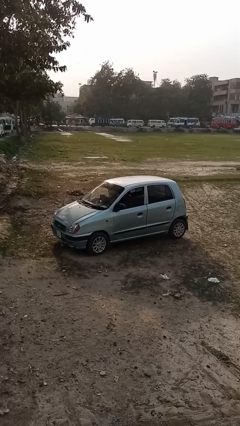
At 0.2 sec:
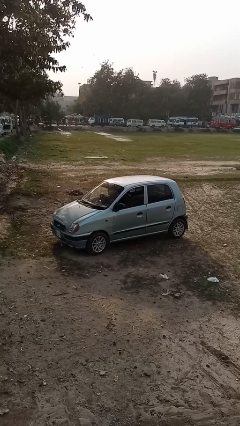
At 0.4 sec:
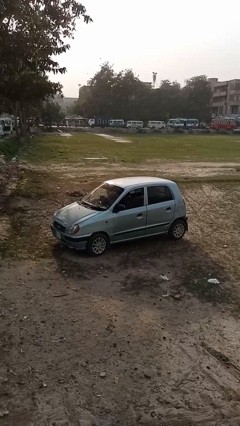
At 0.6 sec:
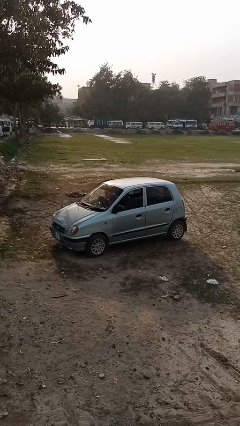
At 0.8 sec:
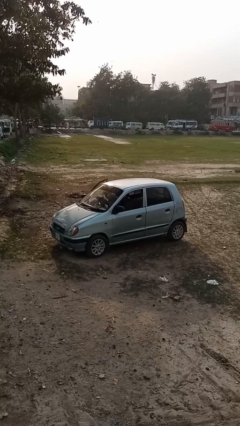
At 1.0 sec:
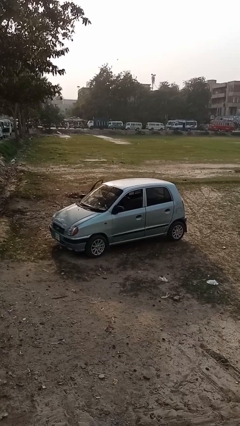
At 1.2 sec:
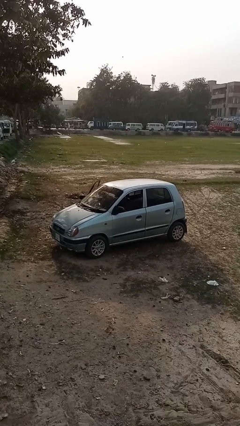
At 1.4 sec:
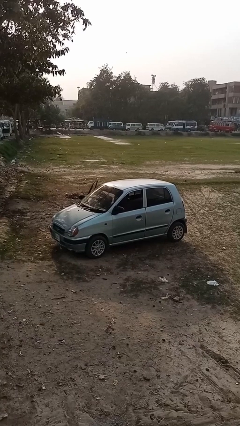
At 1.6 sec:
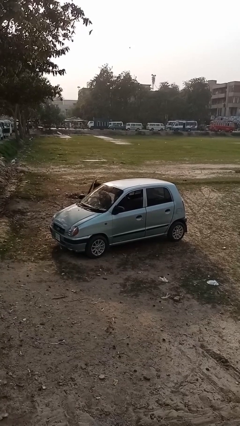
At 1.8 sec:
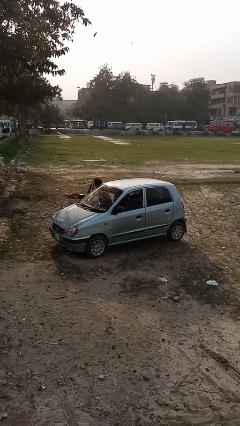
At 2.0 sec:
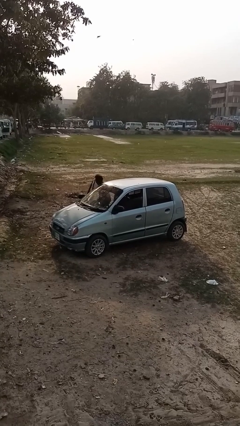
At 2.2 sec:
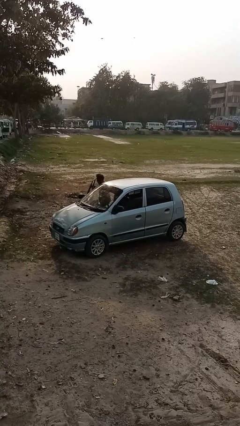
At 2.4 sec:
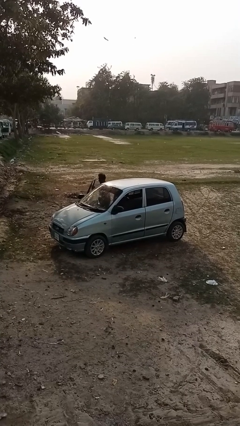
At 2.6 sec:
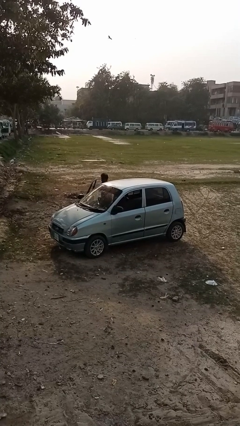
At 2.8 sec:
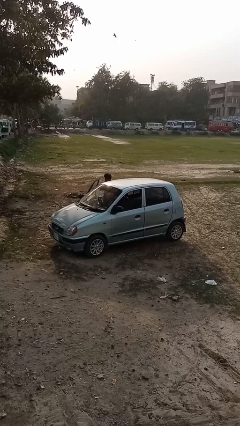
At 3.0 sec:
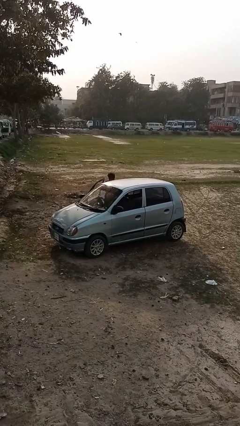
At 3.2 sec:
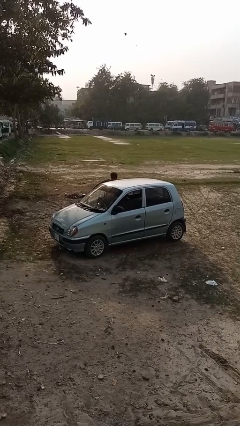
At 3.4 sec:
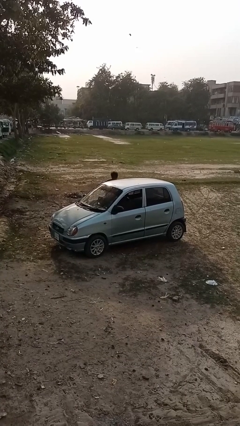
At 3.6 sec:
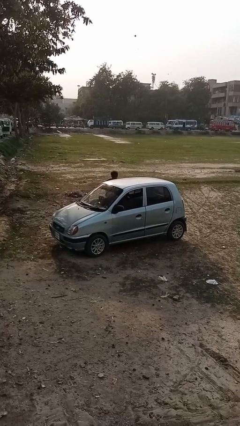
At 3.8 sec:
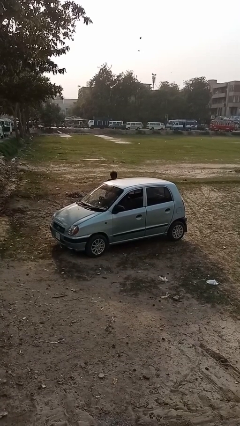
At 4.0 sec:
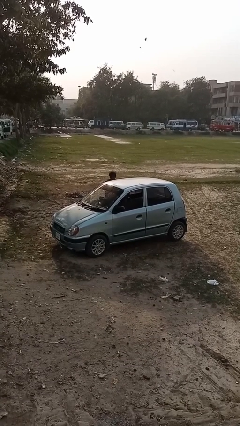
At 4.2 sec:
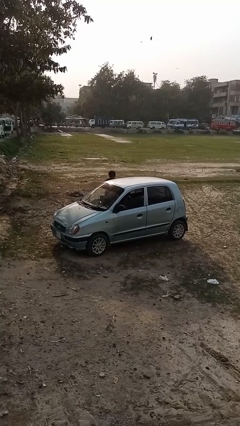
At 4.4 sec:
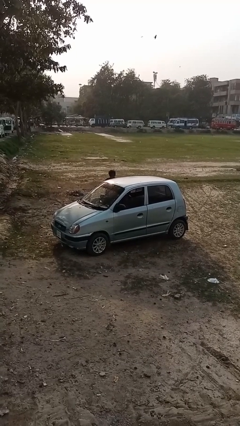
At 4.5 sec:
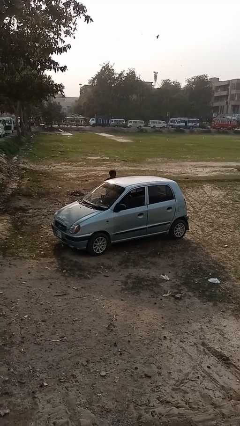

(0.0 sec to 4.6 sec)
car drops off person

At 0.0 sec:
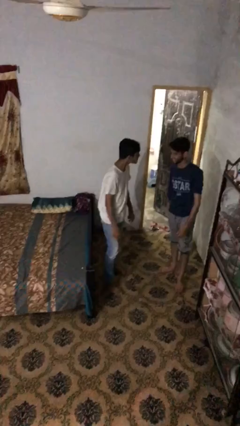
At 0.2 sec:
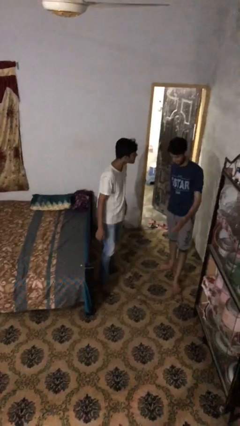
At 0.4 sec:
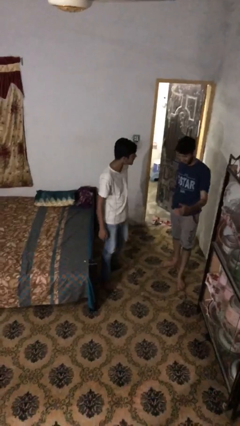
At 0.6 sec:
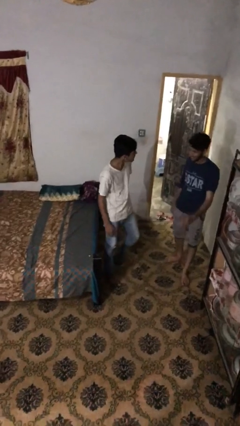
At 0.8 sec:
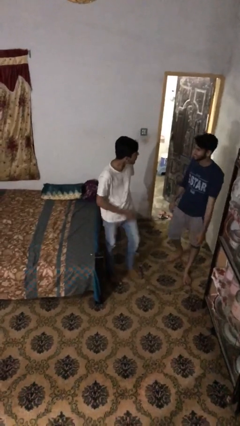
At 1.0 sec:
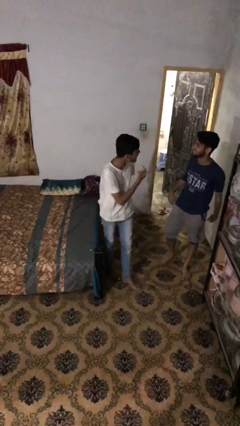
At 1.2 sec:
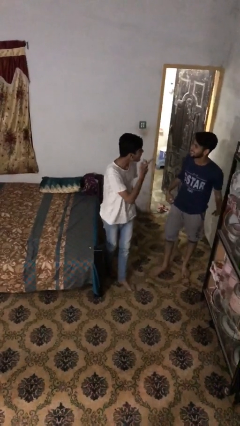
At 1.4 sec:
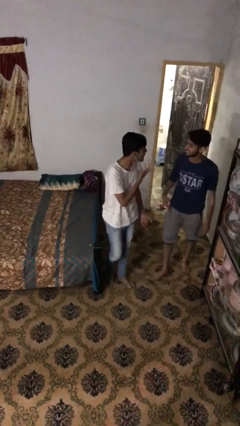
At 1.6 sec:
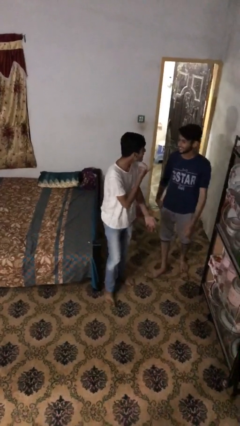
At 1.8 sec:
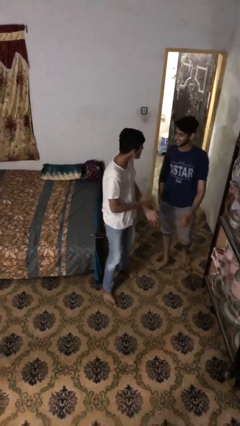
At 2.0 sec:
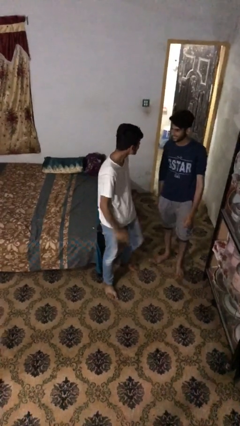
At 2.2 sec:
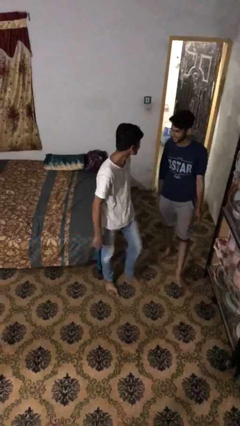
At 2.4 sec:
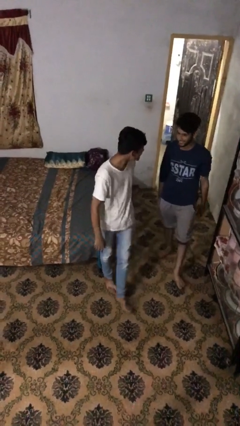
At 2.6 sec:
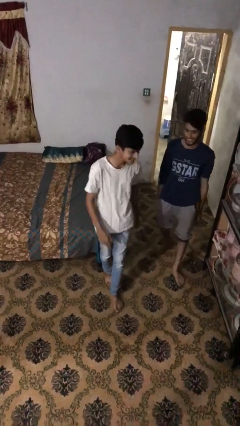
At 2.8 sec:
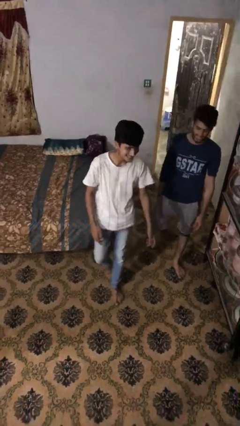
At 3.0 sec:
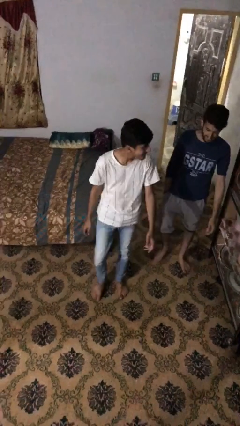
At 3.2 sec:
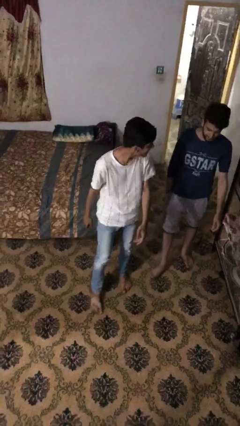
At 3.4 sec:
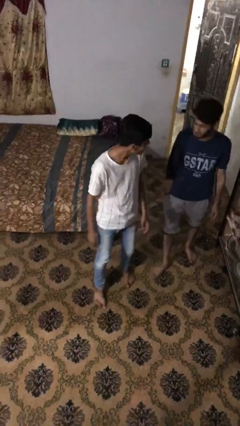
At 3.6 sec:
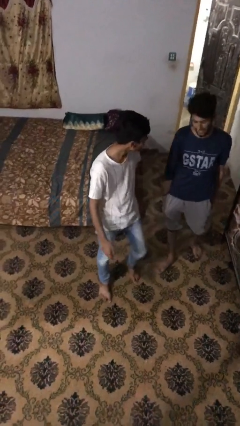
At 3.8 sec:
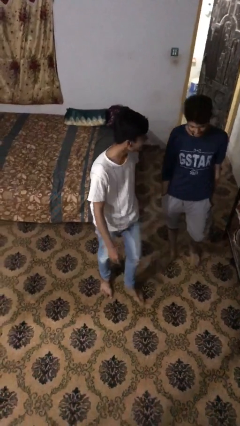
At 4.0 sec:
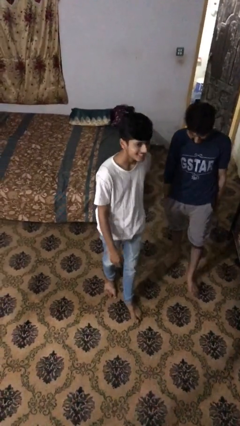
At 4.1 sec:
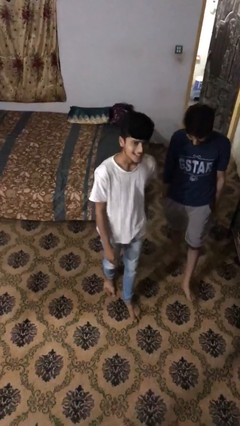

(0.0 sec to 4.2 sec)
person talks to person

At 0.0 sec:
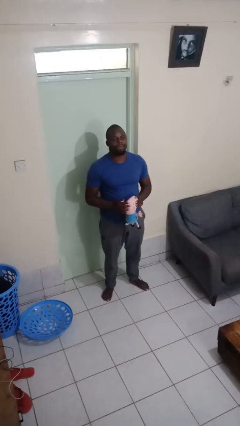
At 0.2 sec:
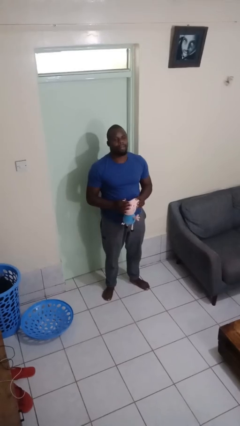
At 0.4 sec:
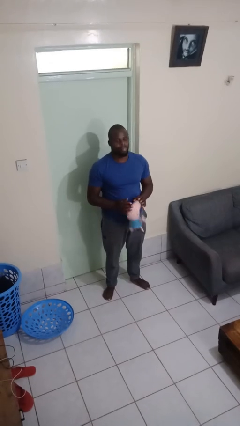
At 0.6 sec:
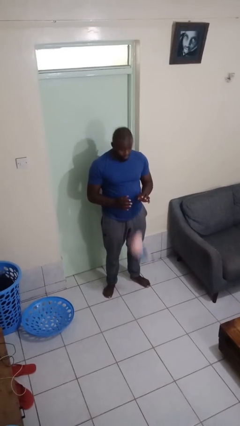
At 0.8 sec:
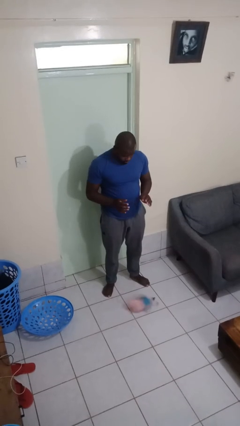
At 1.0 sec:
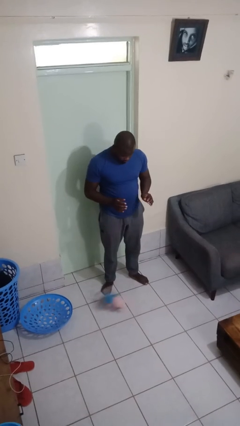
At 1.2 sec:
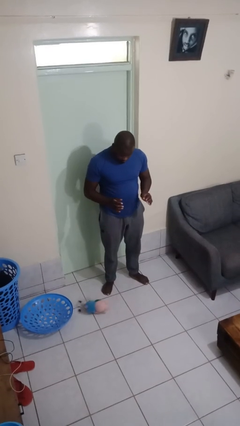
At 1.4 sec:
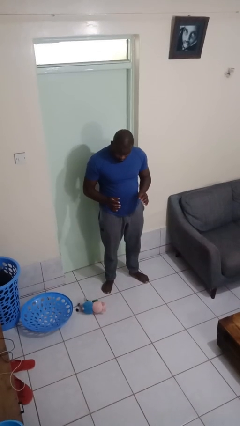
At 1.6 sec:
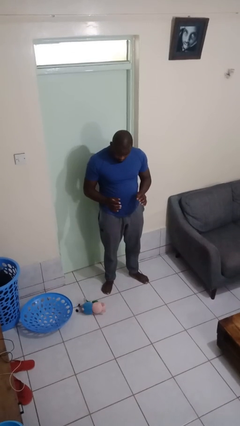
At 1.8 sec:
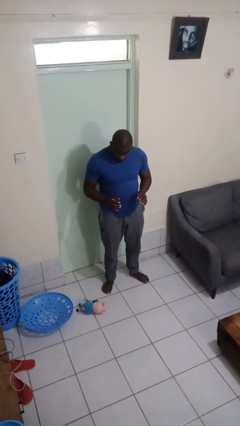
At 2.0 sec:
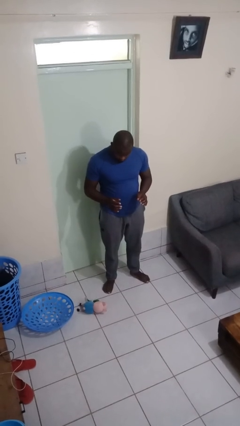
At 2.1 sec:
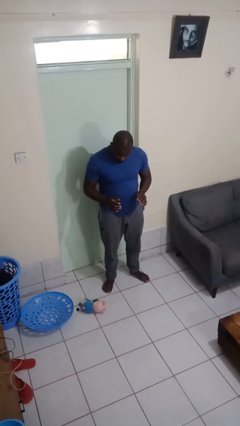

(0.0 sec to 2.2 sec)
person drops object

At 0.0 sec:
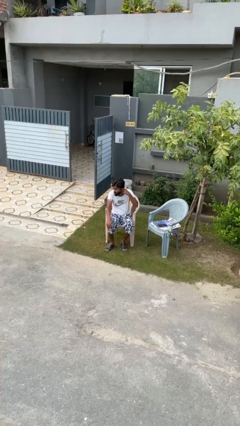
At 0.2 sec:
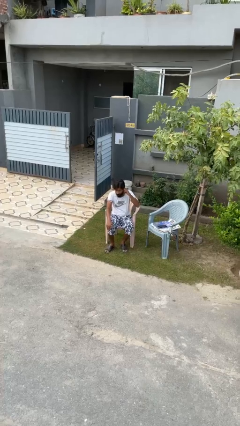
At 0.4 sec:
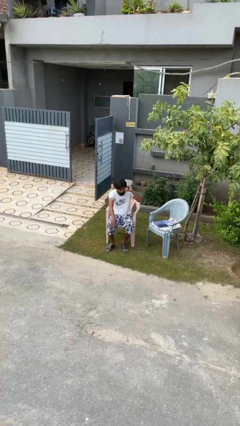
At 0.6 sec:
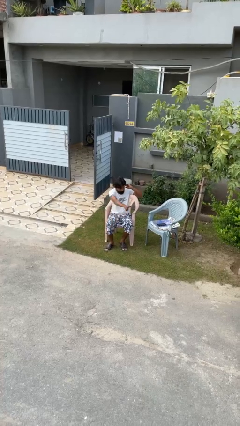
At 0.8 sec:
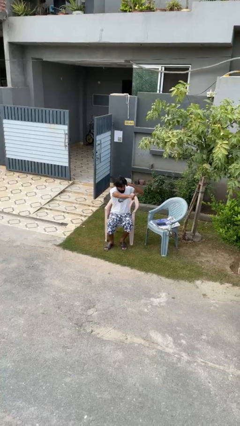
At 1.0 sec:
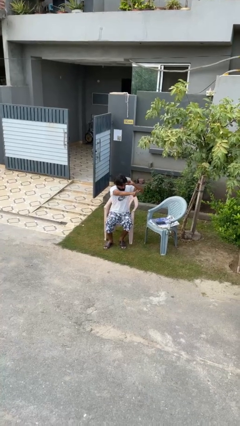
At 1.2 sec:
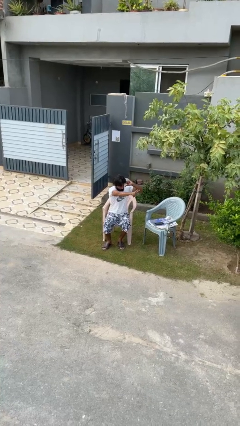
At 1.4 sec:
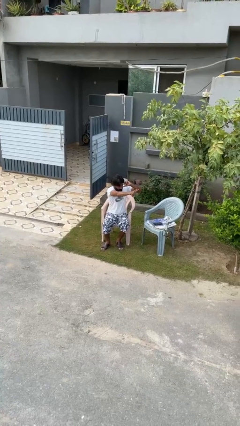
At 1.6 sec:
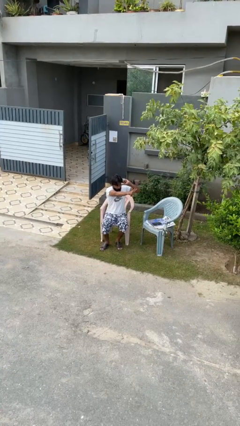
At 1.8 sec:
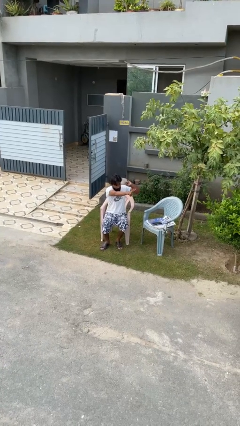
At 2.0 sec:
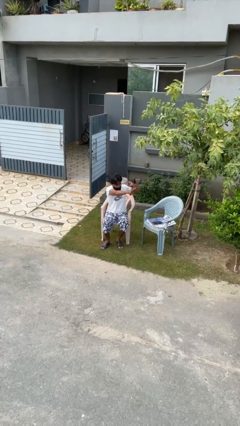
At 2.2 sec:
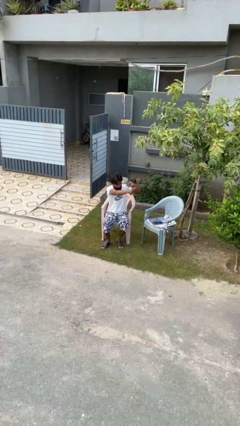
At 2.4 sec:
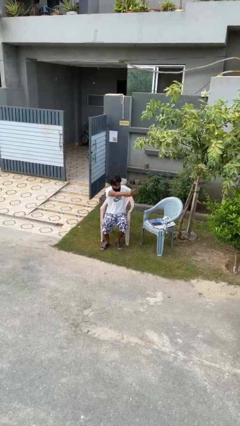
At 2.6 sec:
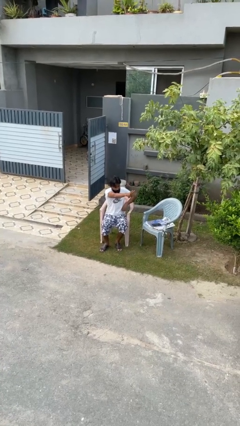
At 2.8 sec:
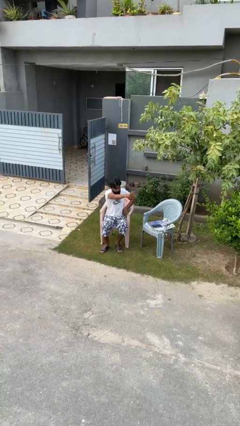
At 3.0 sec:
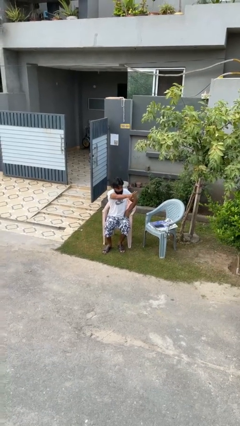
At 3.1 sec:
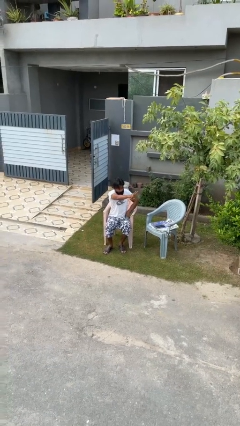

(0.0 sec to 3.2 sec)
person gestures peace

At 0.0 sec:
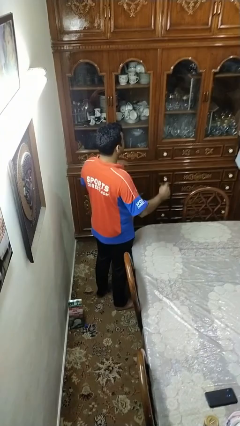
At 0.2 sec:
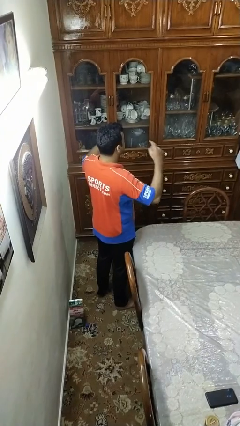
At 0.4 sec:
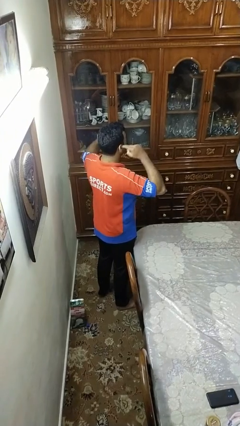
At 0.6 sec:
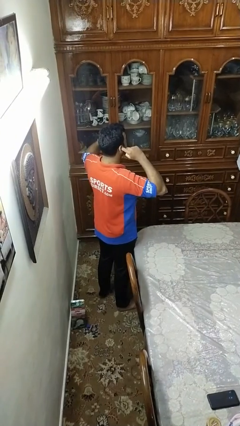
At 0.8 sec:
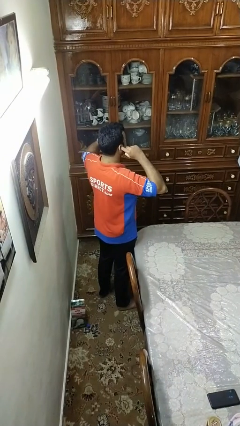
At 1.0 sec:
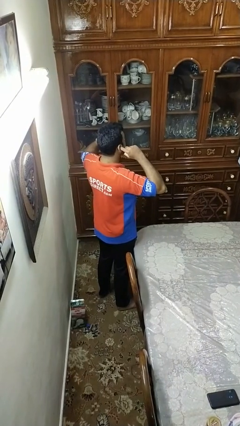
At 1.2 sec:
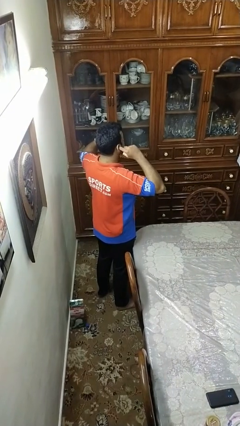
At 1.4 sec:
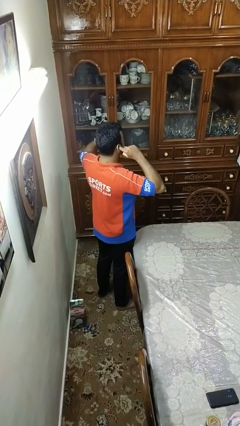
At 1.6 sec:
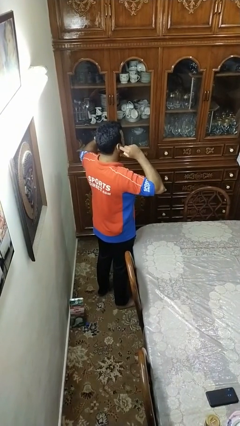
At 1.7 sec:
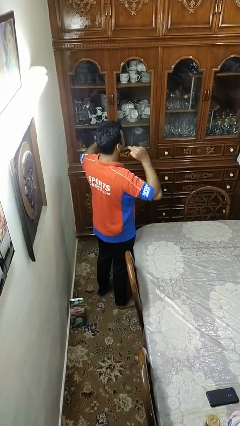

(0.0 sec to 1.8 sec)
person puts fingers in ear

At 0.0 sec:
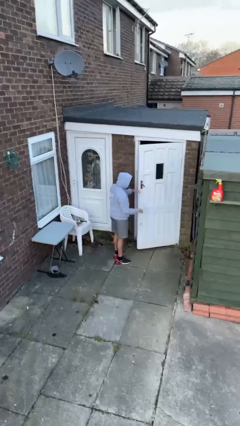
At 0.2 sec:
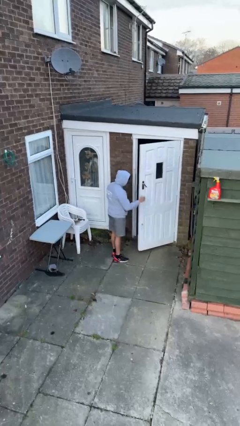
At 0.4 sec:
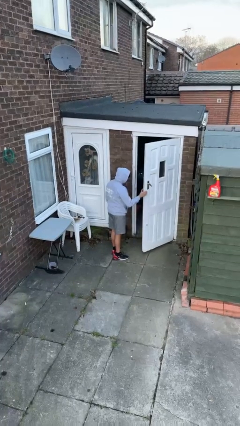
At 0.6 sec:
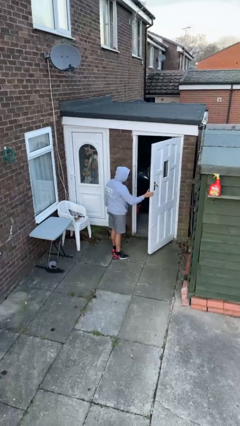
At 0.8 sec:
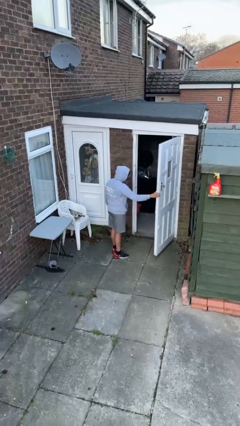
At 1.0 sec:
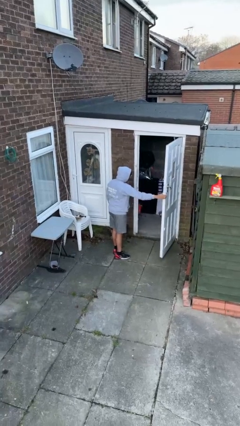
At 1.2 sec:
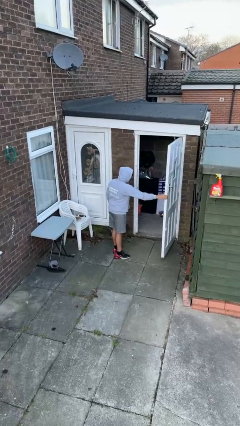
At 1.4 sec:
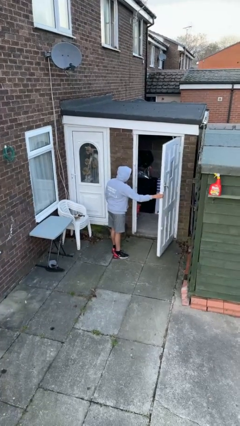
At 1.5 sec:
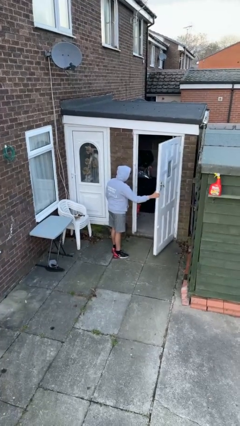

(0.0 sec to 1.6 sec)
person opens facility door
